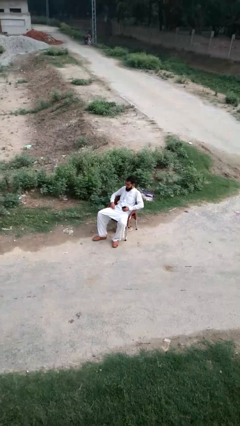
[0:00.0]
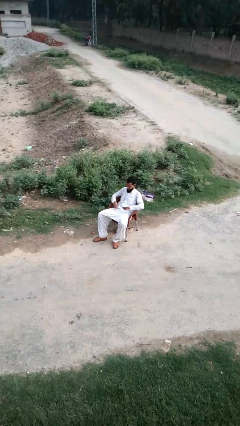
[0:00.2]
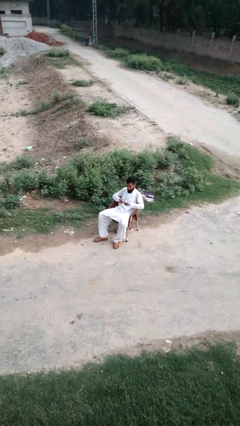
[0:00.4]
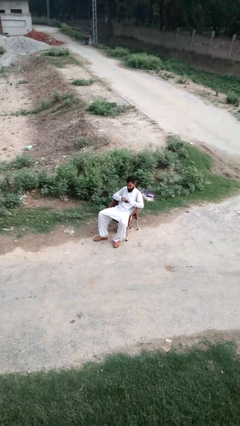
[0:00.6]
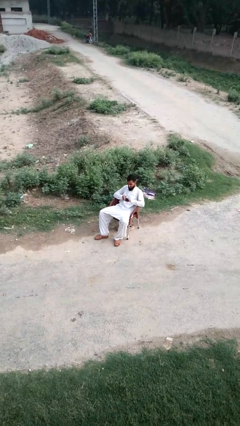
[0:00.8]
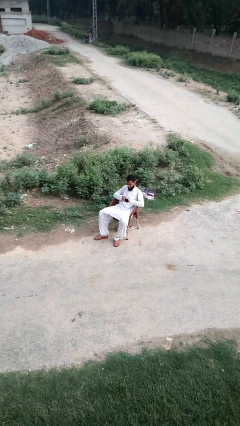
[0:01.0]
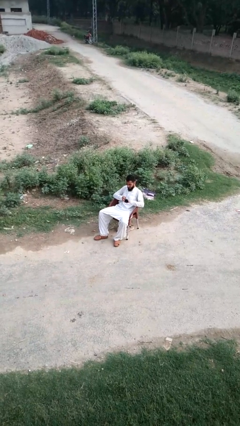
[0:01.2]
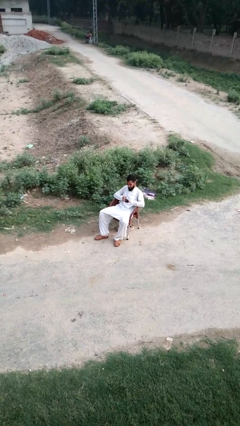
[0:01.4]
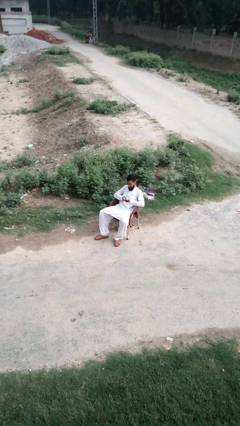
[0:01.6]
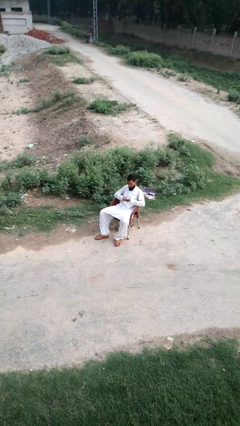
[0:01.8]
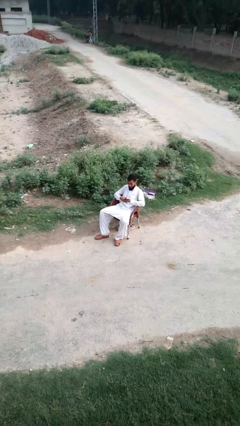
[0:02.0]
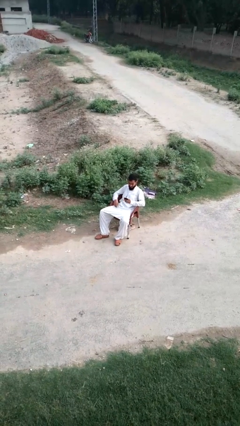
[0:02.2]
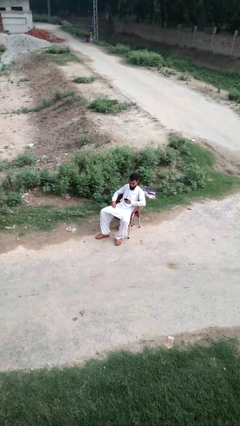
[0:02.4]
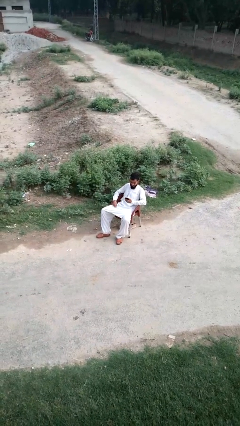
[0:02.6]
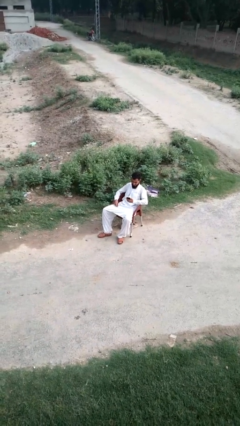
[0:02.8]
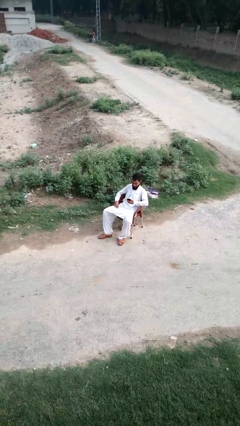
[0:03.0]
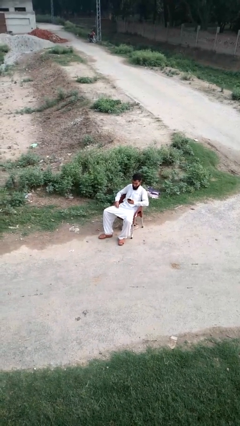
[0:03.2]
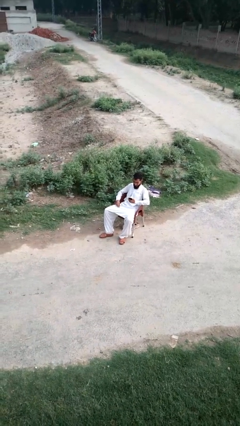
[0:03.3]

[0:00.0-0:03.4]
person puts on headphones

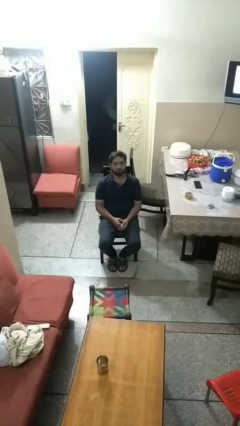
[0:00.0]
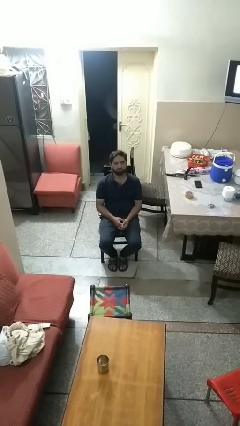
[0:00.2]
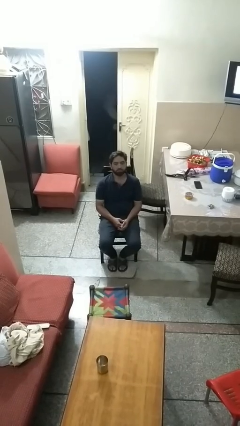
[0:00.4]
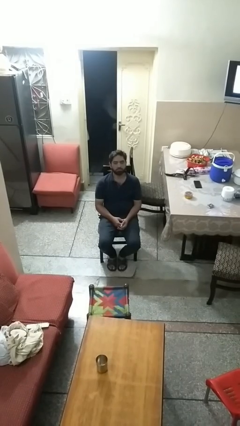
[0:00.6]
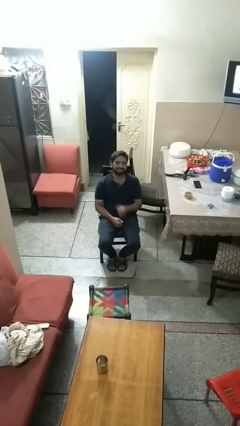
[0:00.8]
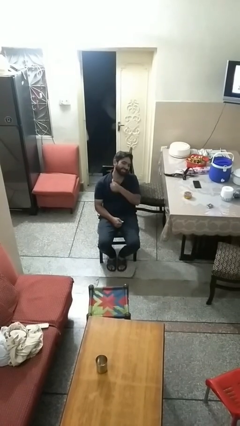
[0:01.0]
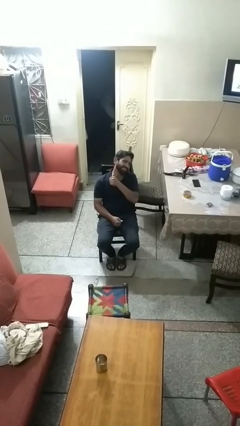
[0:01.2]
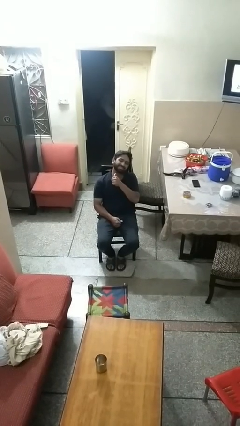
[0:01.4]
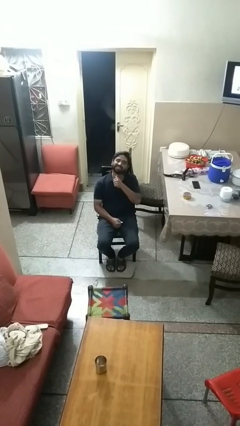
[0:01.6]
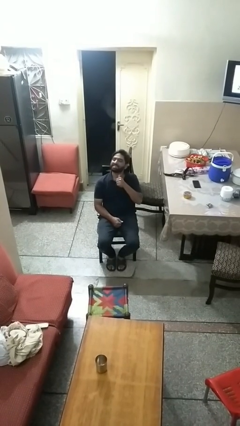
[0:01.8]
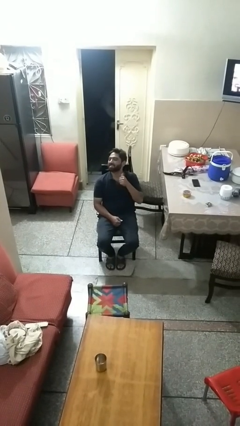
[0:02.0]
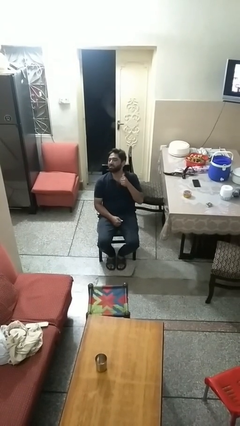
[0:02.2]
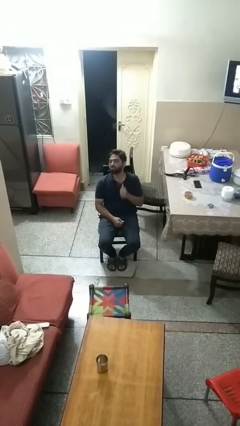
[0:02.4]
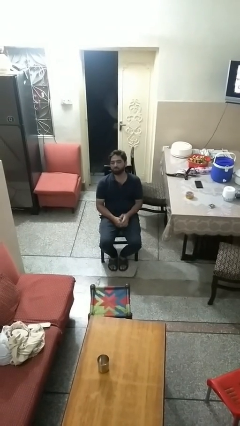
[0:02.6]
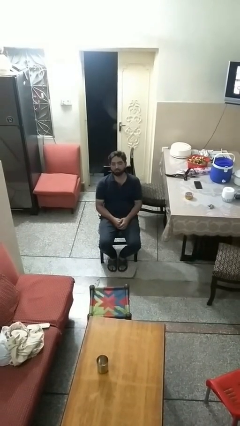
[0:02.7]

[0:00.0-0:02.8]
person gestures cut

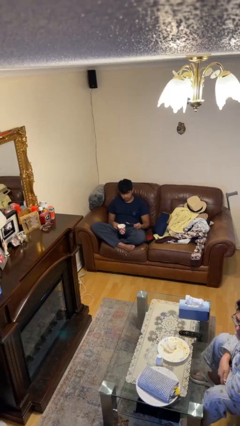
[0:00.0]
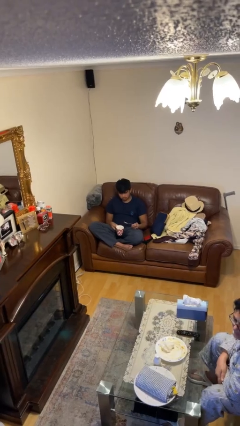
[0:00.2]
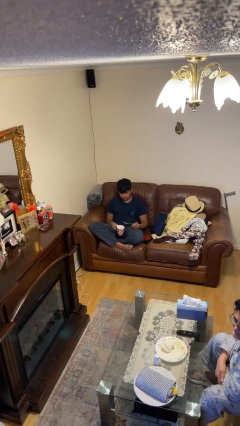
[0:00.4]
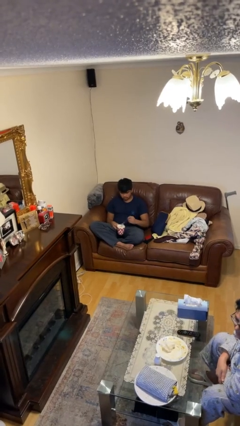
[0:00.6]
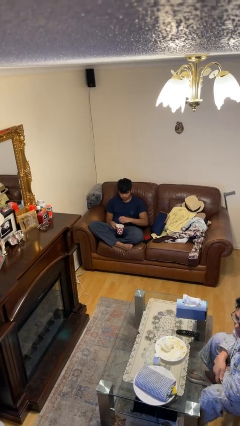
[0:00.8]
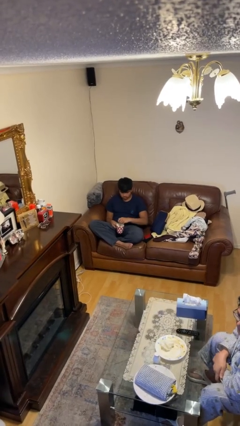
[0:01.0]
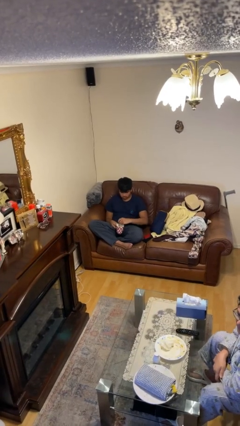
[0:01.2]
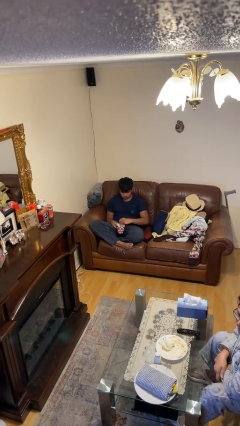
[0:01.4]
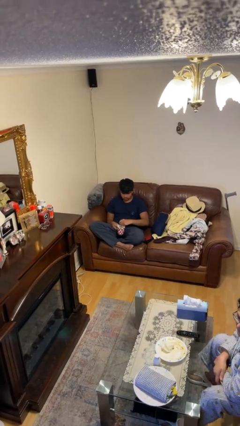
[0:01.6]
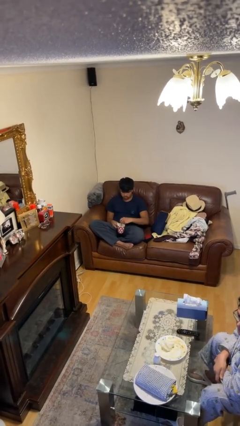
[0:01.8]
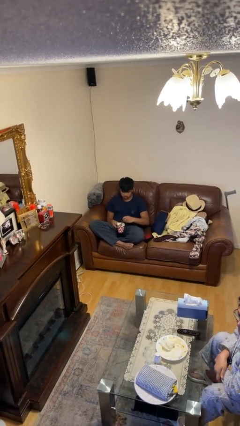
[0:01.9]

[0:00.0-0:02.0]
person stirs mug

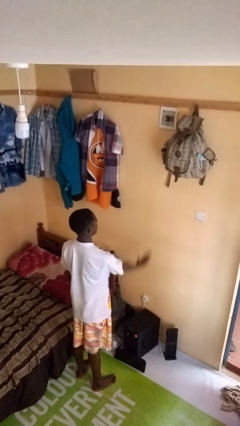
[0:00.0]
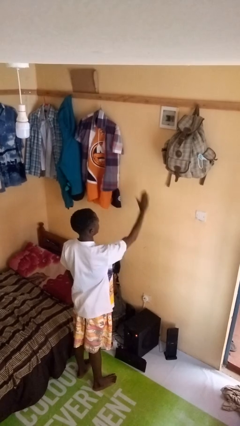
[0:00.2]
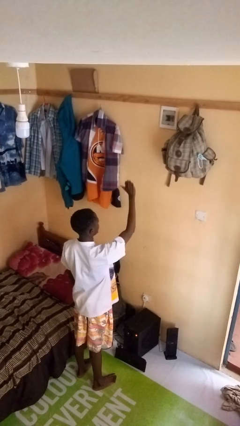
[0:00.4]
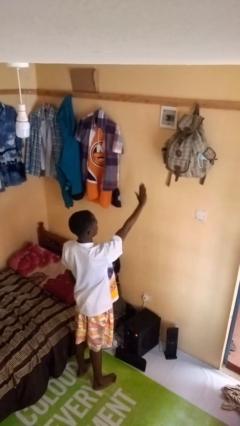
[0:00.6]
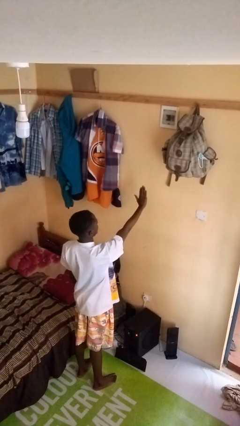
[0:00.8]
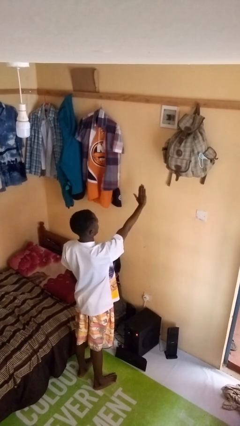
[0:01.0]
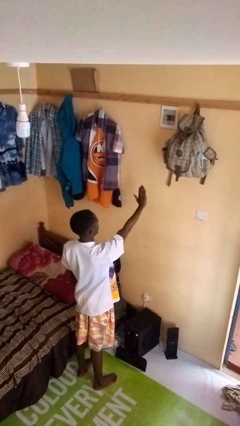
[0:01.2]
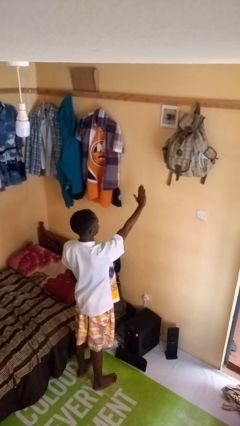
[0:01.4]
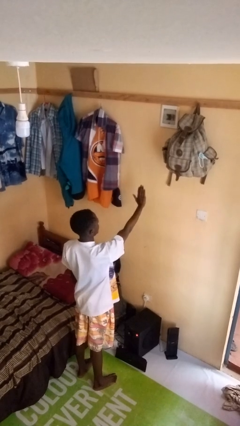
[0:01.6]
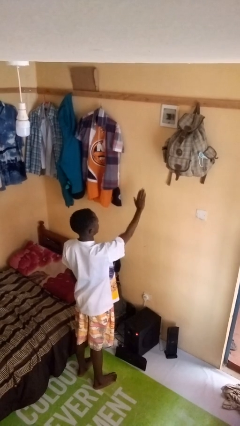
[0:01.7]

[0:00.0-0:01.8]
person gestures stop

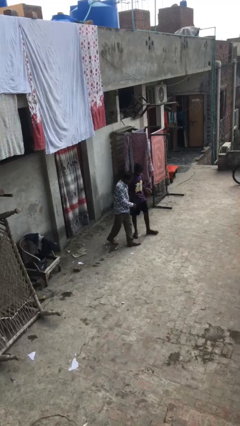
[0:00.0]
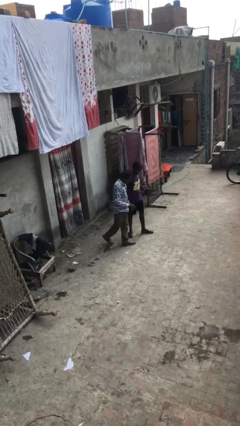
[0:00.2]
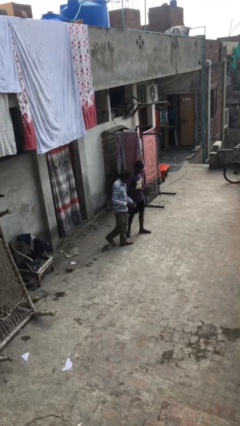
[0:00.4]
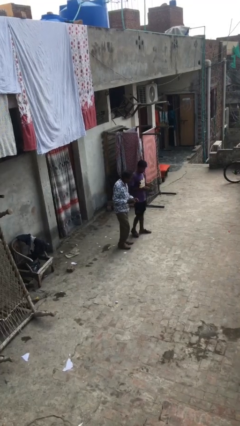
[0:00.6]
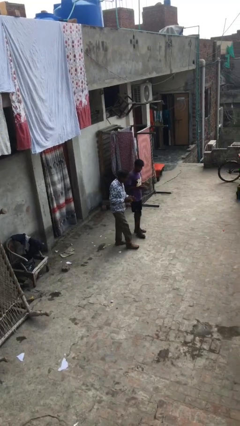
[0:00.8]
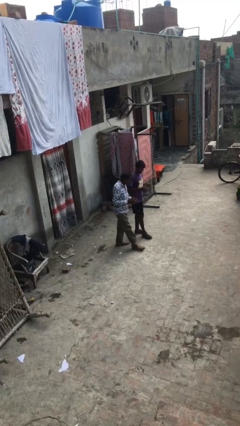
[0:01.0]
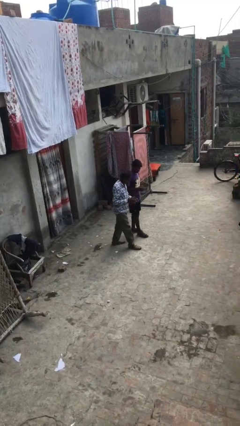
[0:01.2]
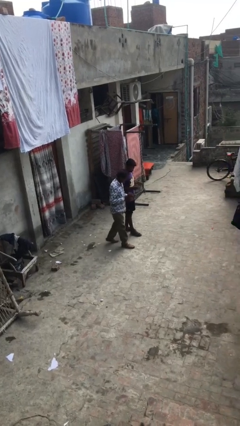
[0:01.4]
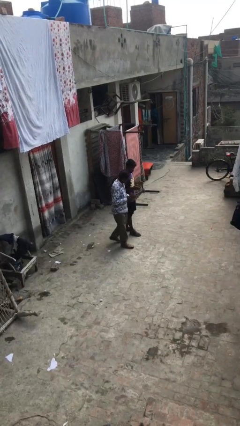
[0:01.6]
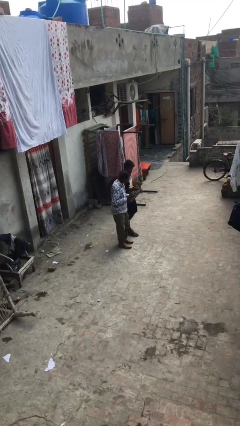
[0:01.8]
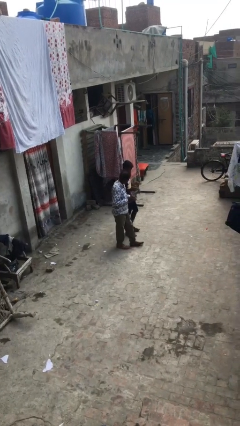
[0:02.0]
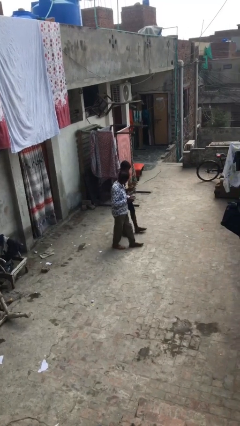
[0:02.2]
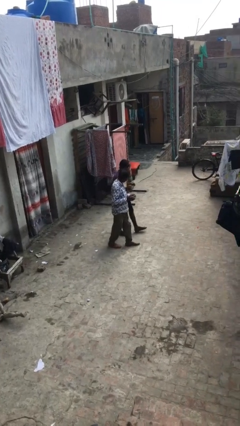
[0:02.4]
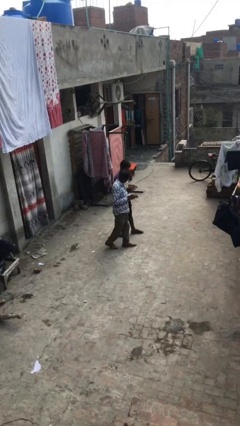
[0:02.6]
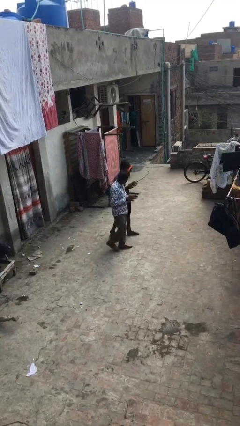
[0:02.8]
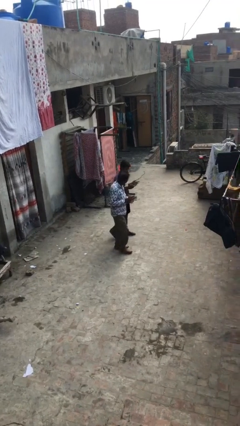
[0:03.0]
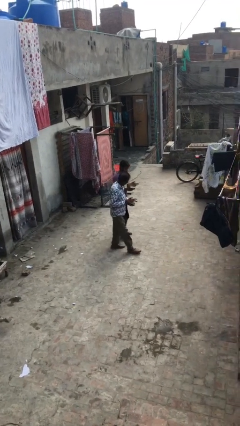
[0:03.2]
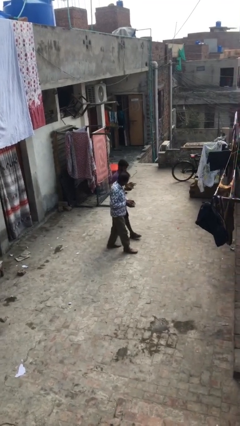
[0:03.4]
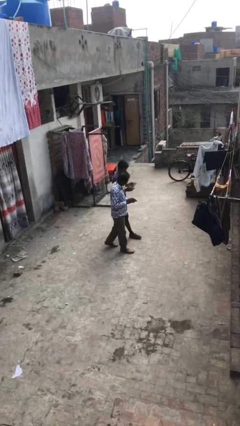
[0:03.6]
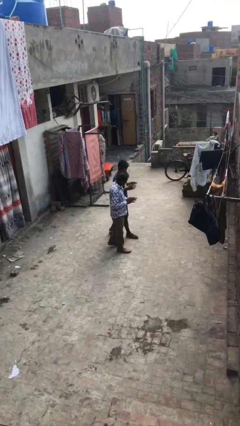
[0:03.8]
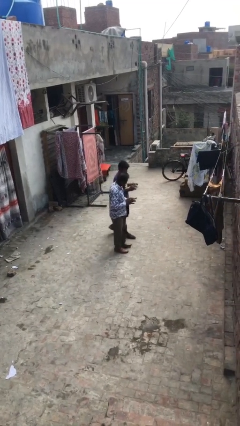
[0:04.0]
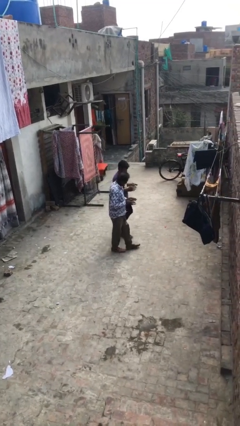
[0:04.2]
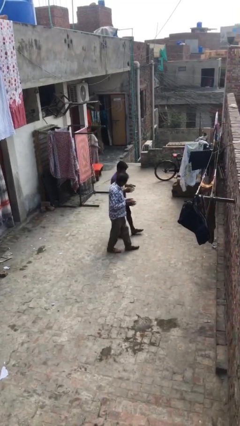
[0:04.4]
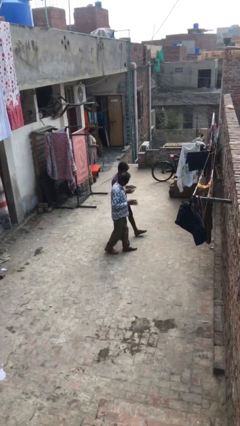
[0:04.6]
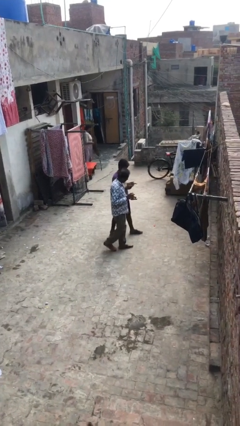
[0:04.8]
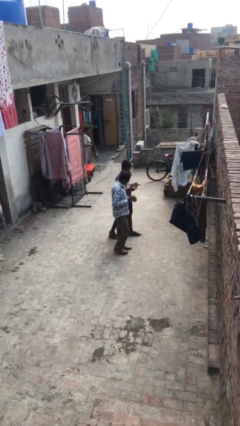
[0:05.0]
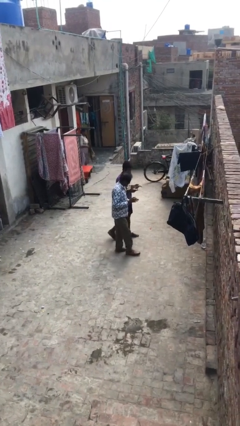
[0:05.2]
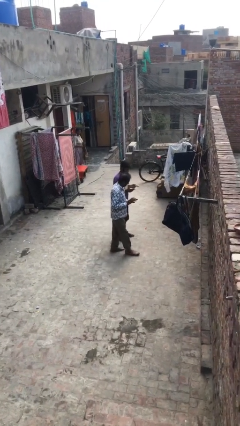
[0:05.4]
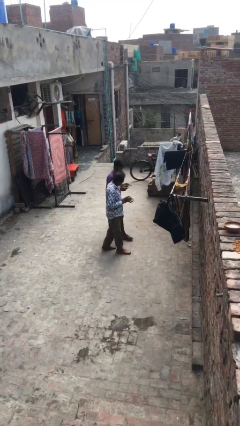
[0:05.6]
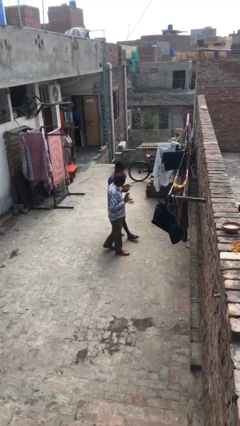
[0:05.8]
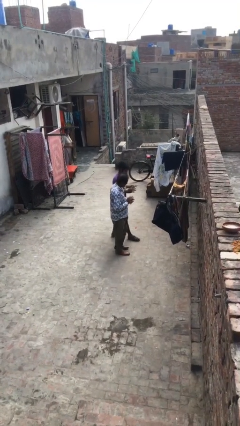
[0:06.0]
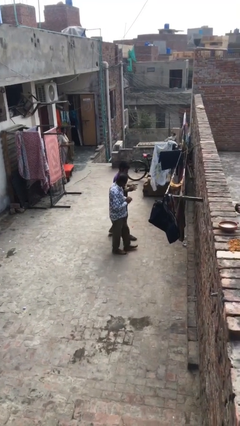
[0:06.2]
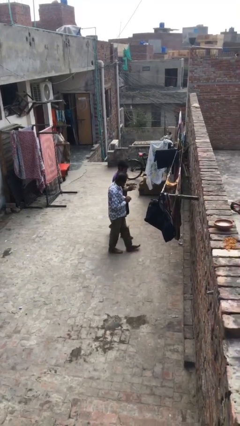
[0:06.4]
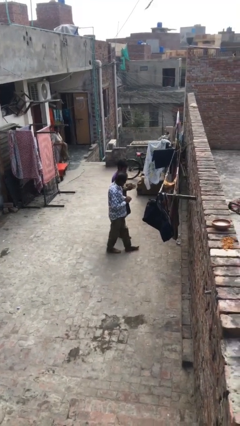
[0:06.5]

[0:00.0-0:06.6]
person talks to person

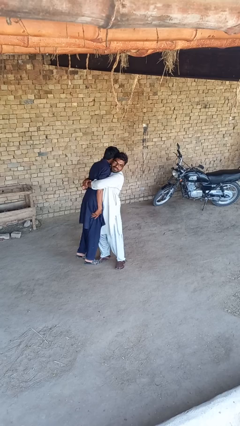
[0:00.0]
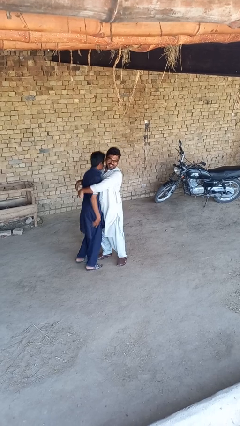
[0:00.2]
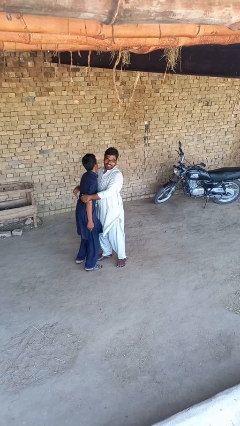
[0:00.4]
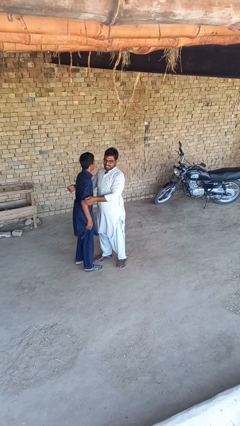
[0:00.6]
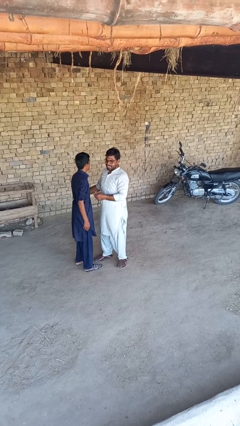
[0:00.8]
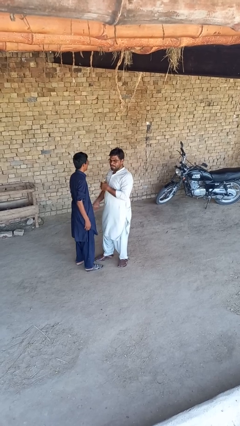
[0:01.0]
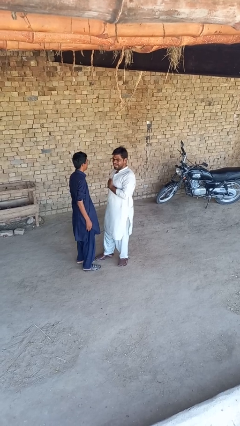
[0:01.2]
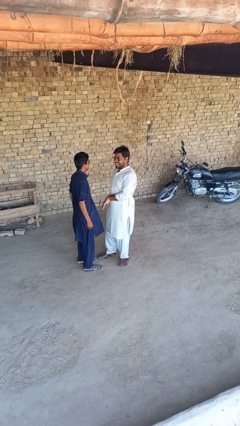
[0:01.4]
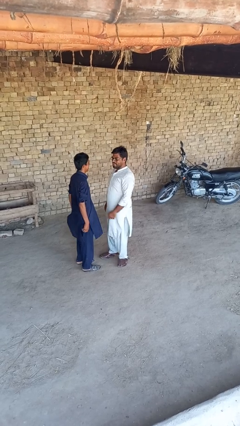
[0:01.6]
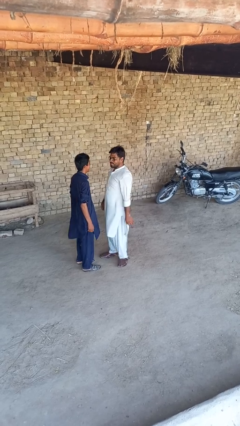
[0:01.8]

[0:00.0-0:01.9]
person puts down person
